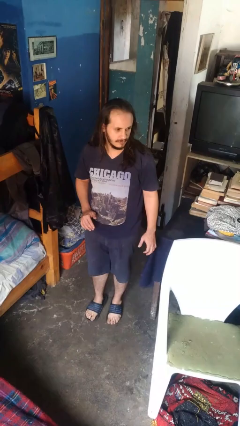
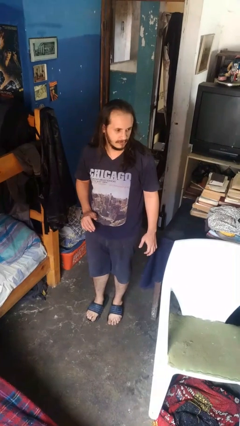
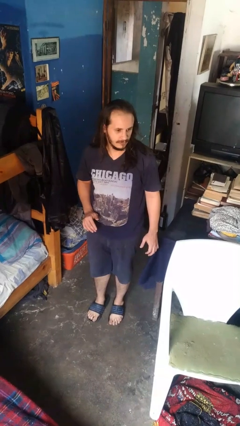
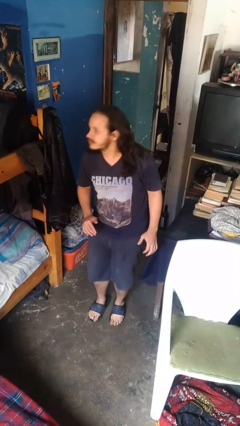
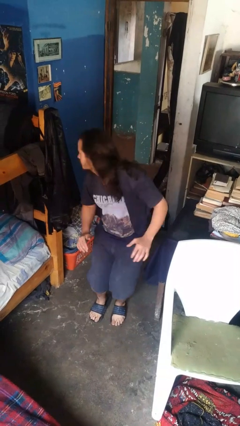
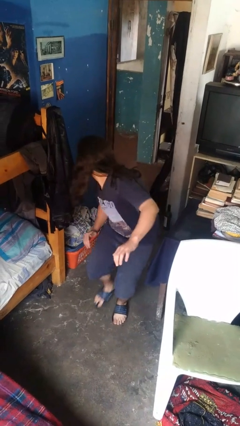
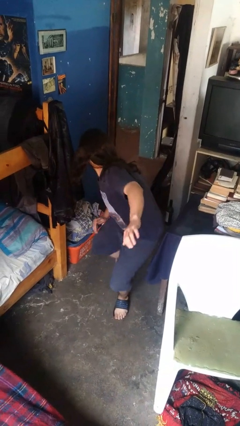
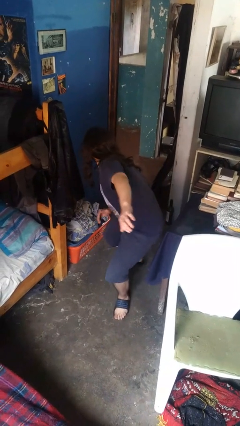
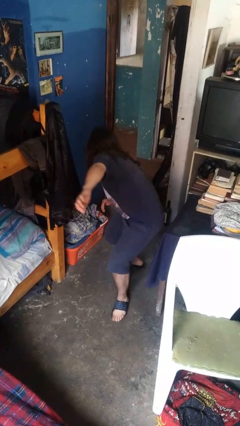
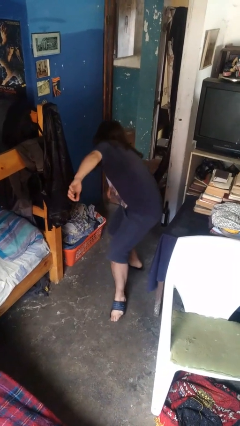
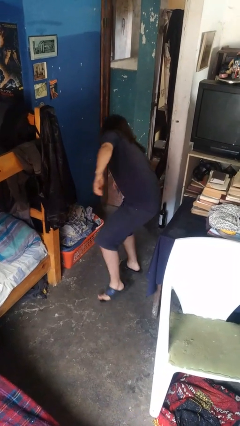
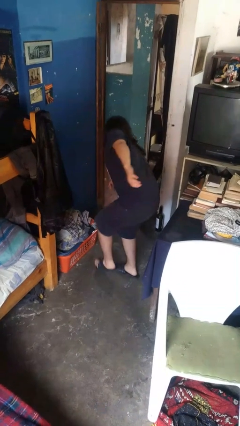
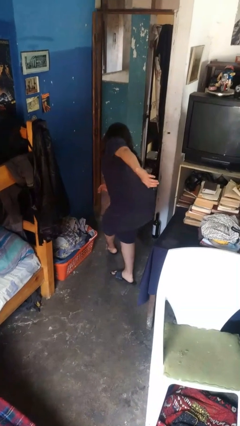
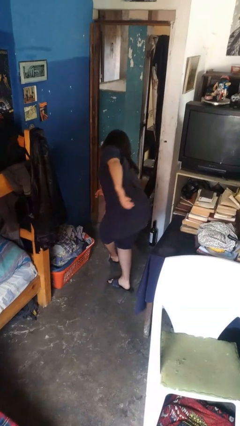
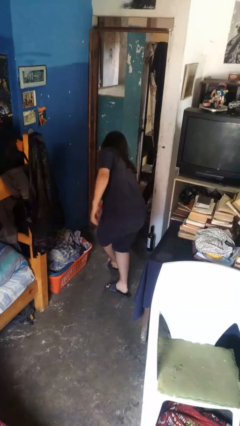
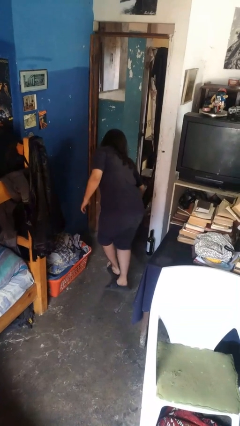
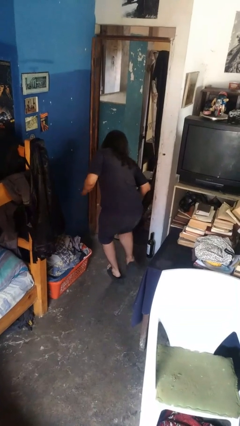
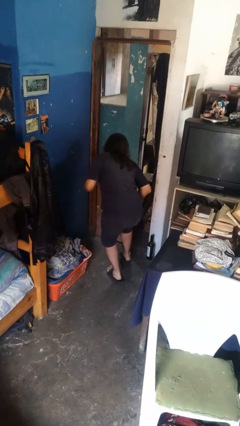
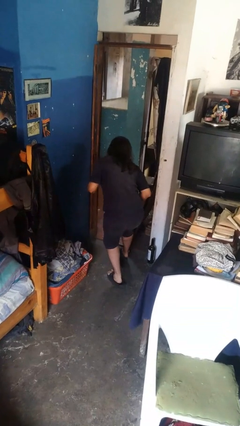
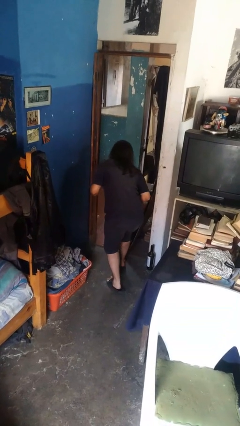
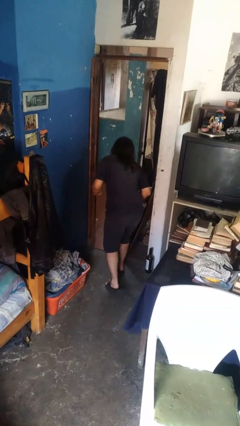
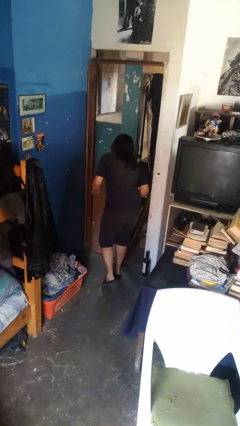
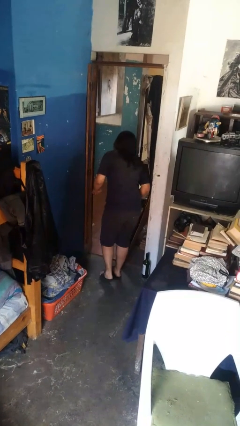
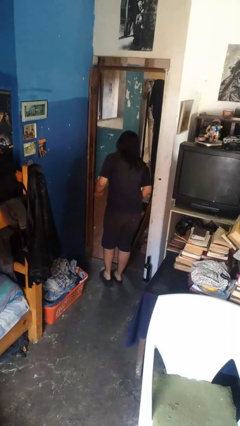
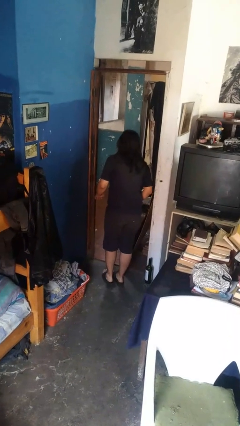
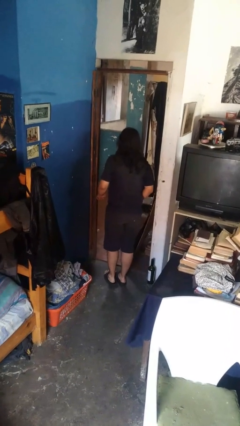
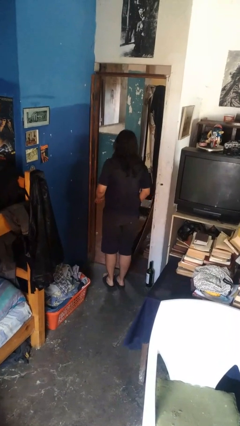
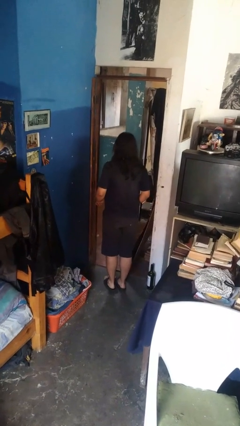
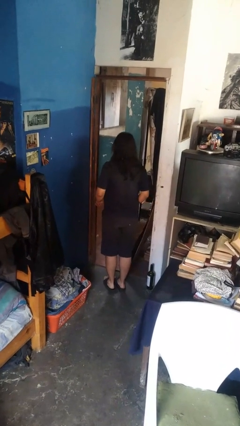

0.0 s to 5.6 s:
person walks tiptoe

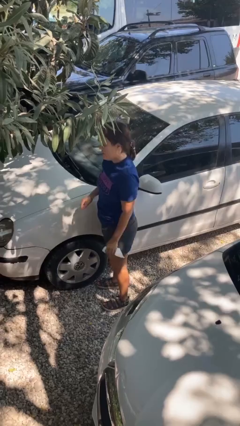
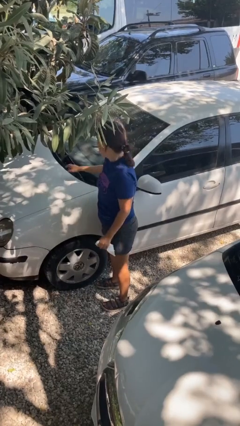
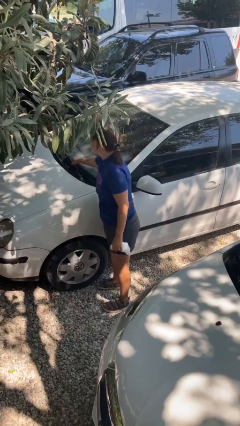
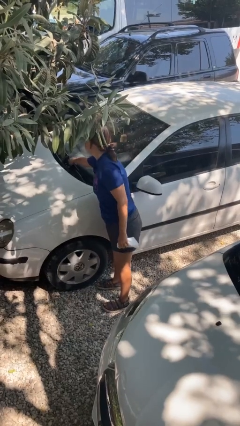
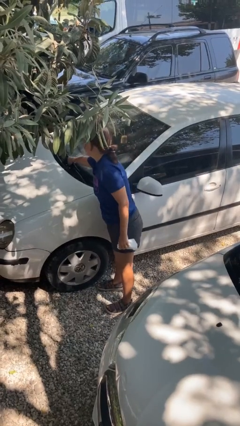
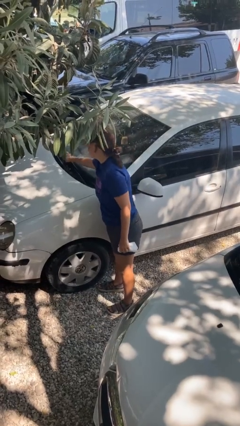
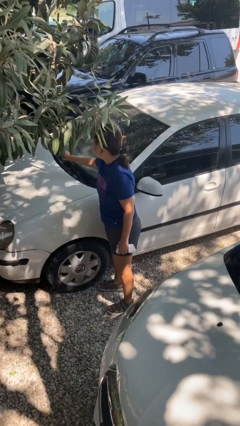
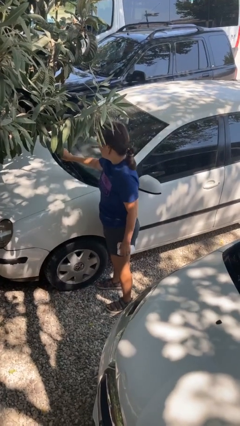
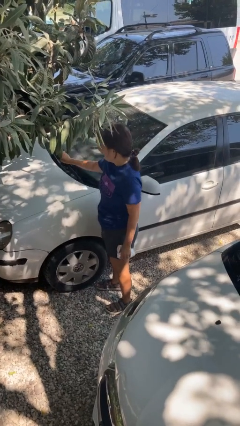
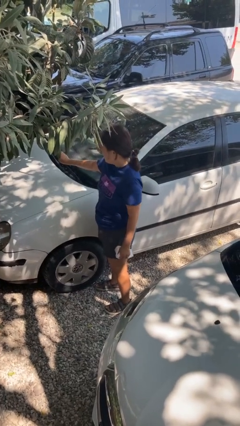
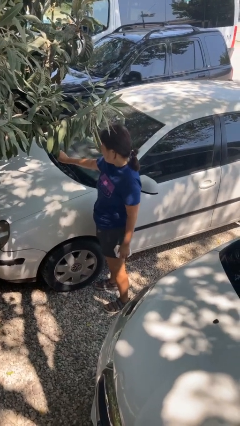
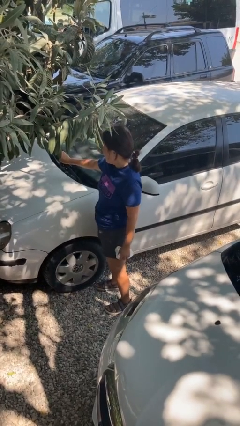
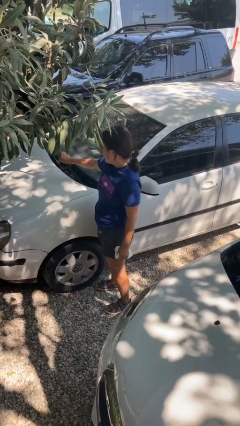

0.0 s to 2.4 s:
person flips up car wipers

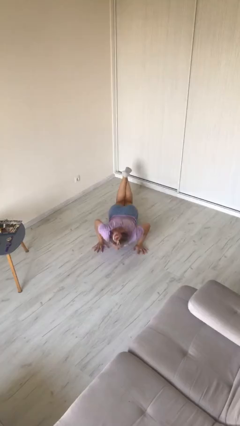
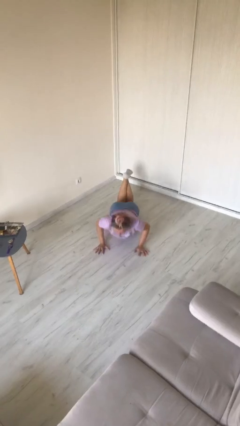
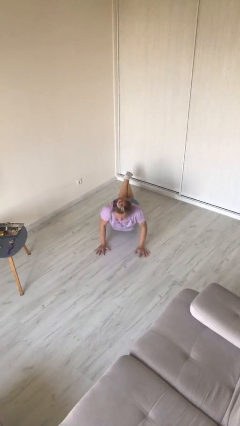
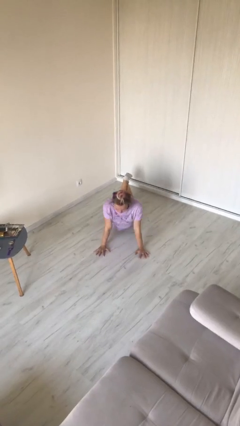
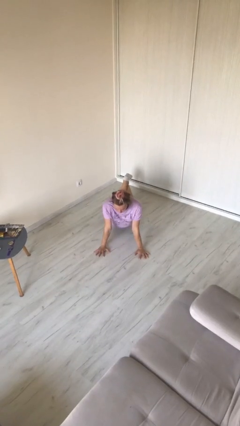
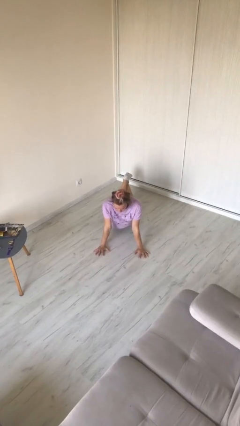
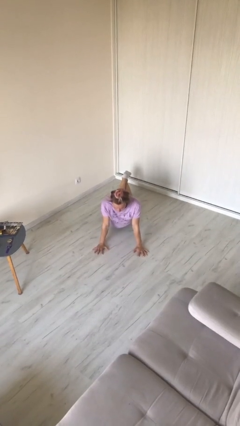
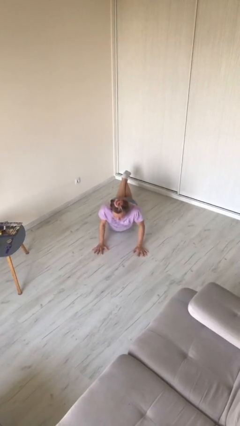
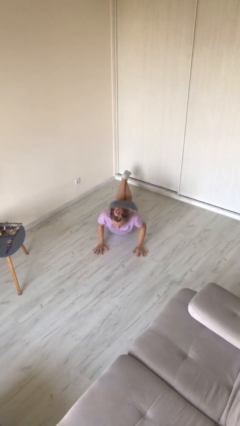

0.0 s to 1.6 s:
person exercises with pushup

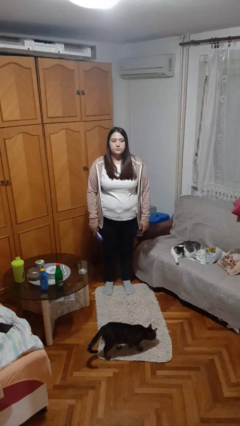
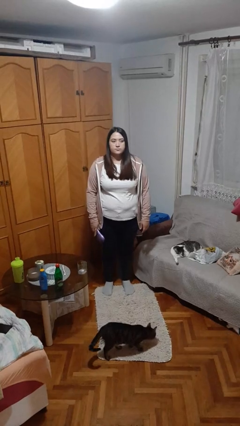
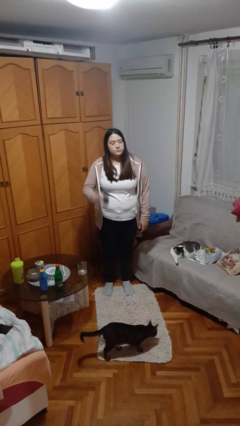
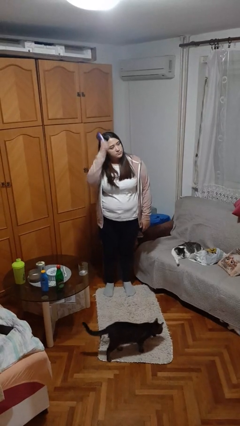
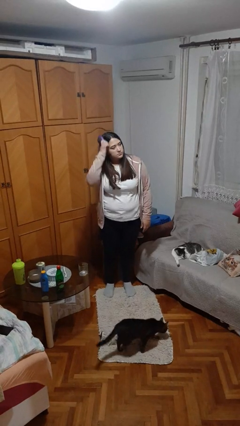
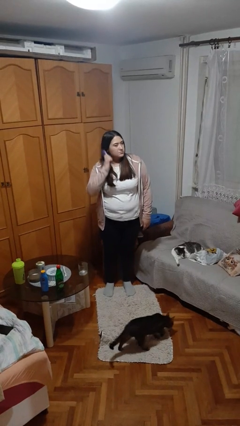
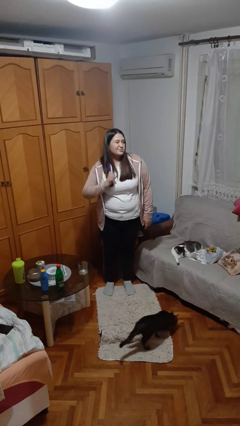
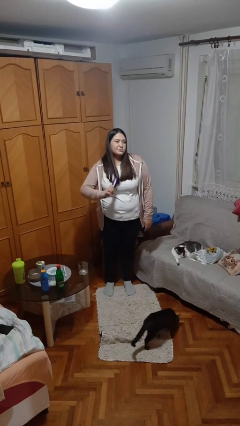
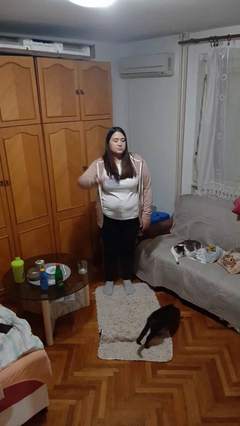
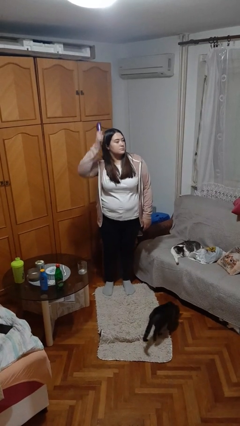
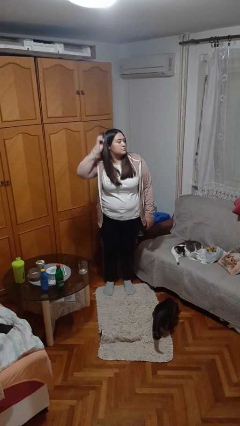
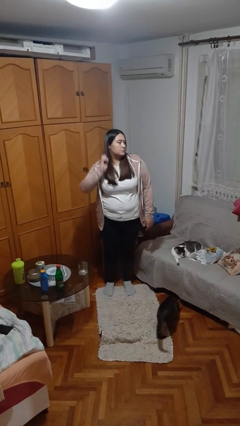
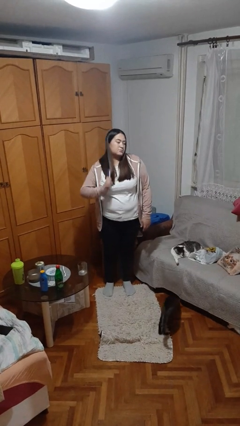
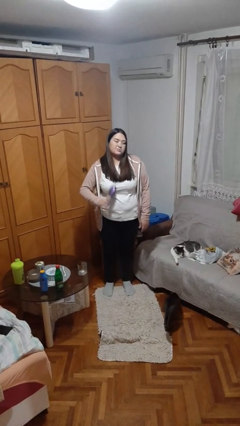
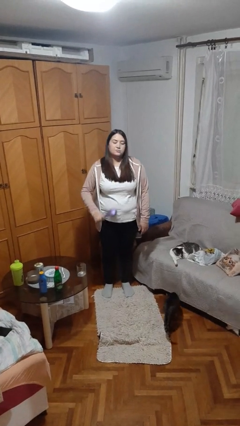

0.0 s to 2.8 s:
person brushes hair

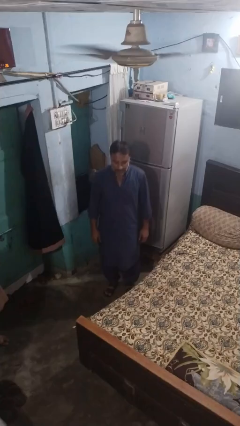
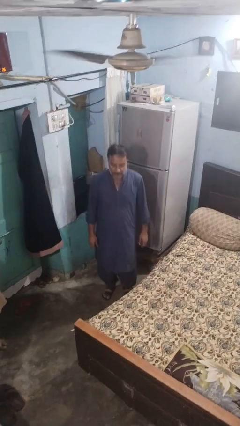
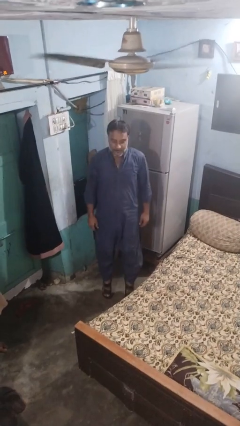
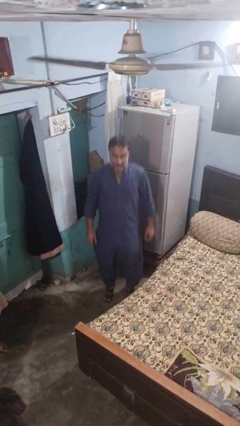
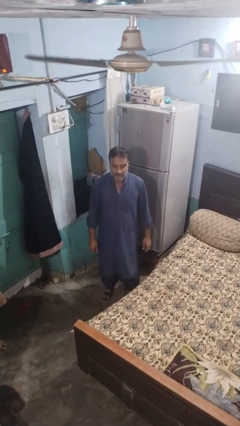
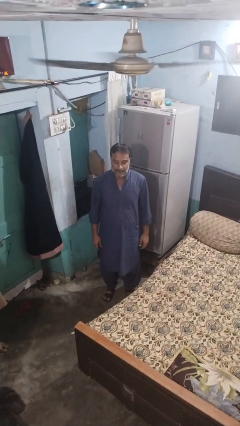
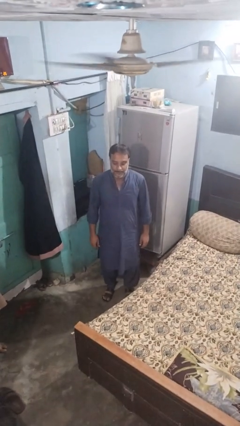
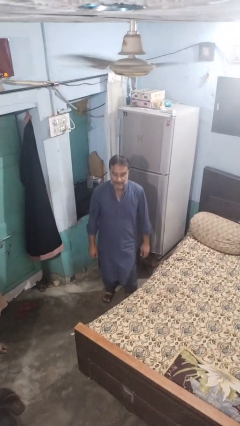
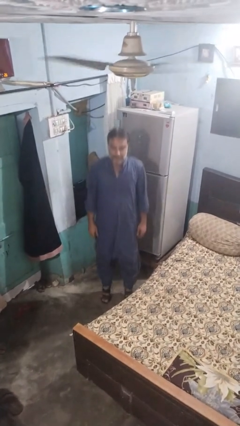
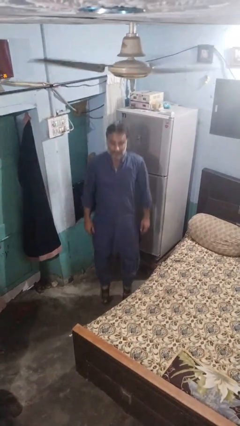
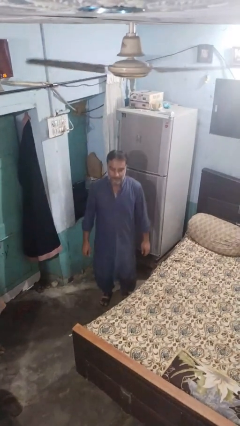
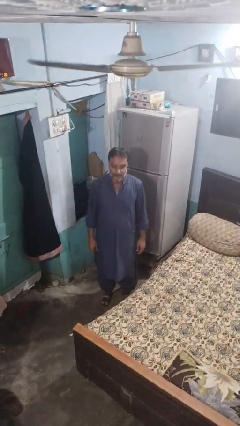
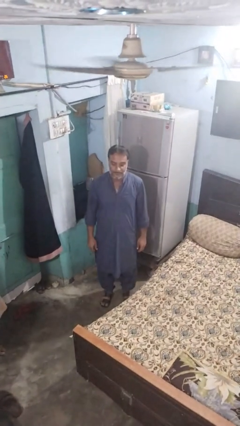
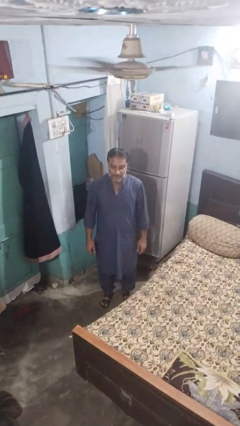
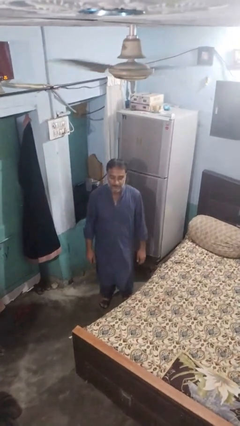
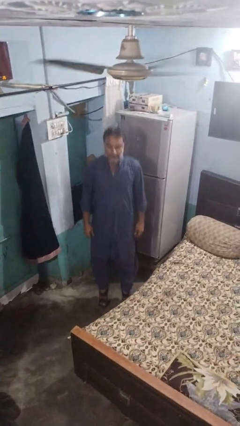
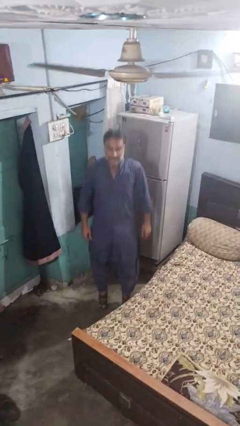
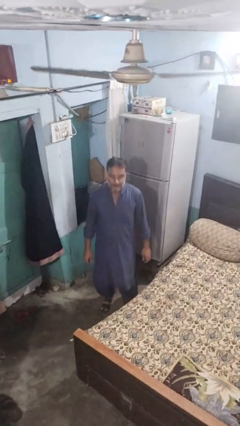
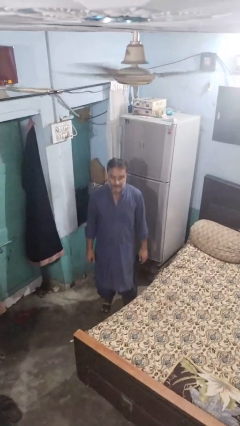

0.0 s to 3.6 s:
person jumps

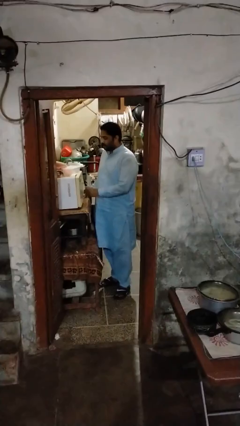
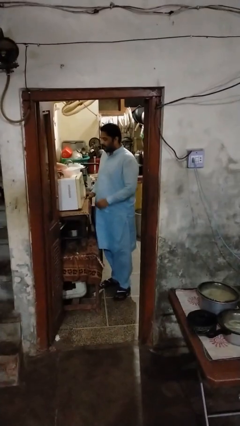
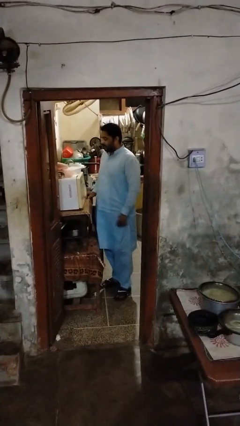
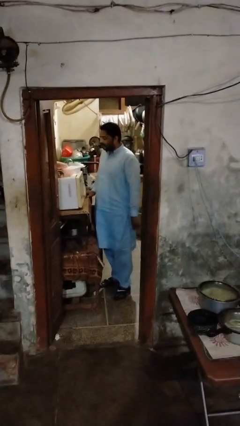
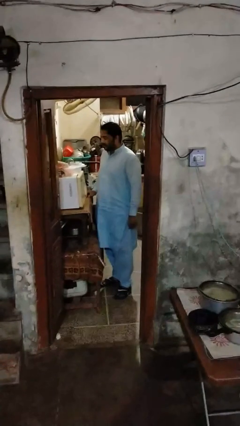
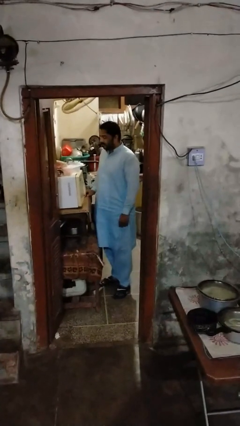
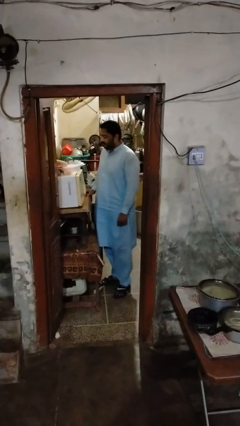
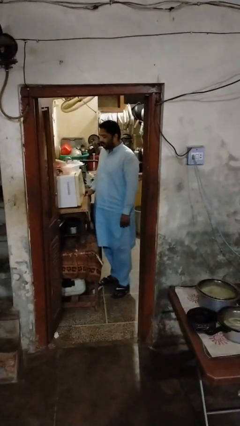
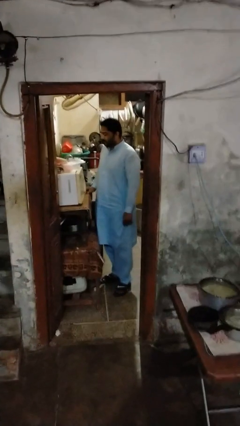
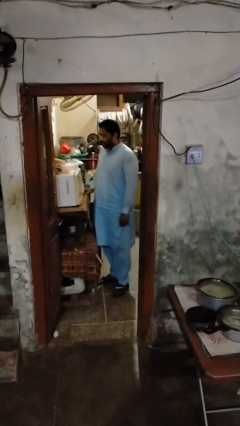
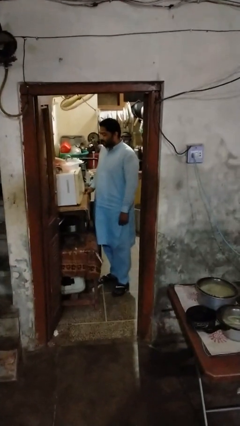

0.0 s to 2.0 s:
person stands up from floor

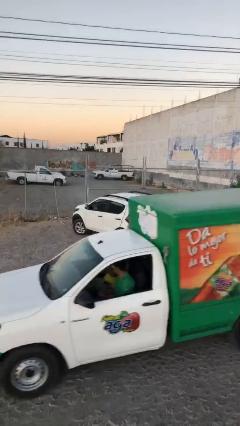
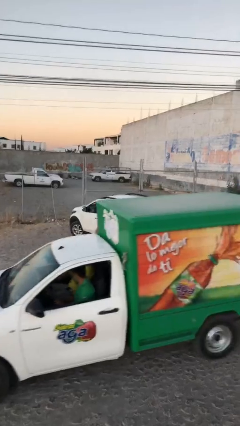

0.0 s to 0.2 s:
car drops off person
